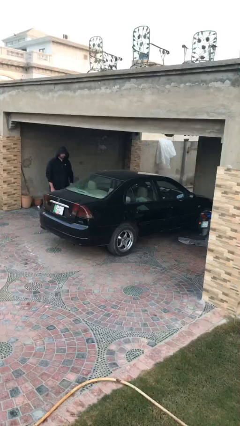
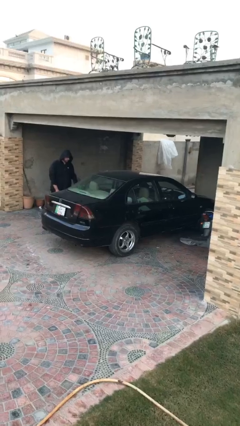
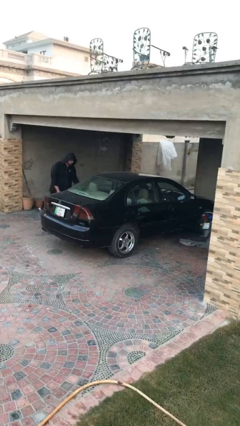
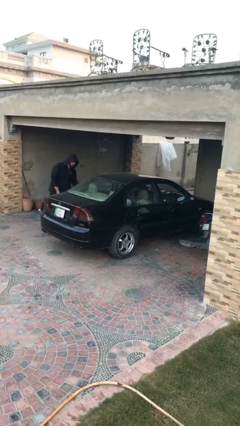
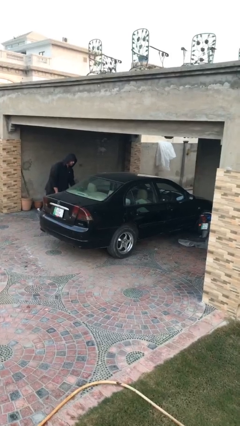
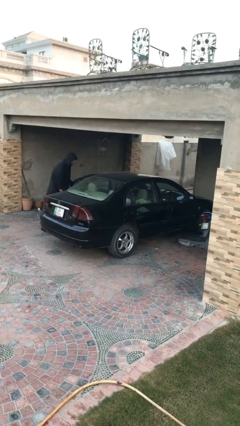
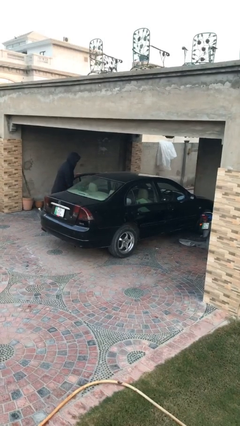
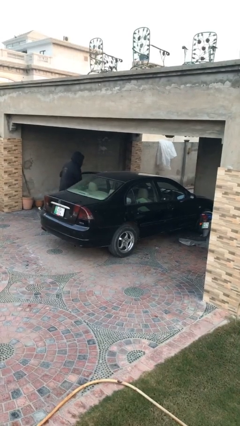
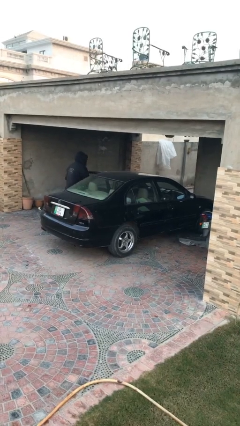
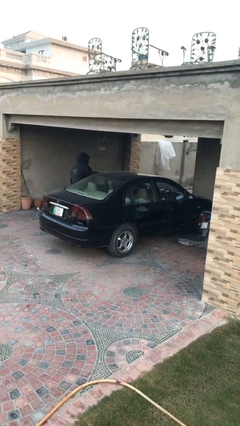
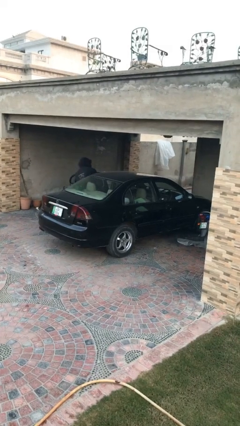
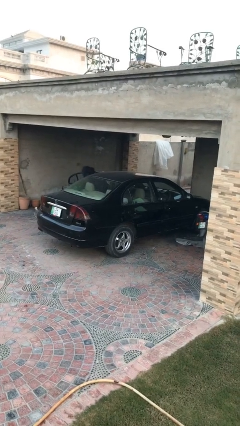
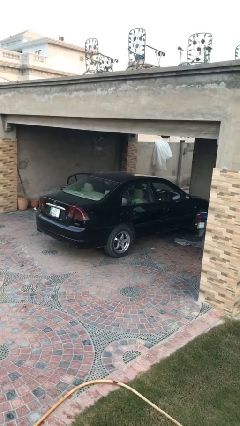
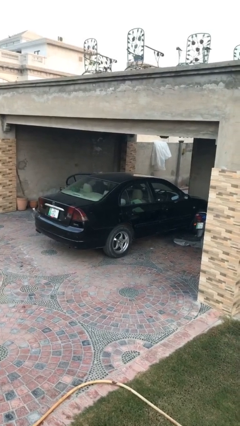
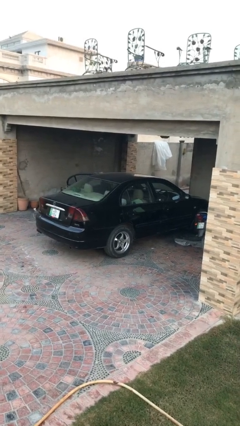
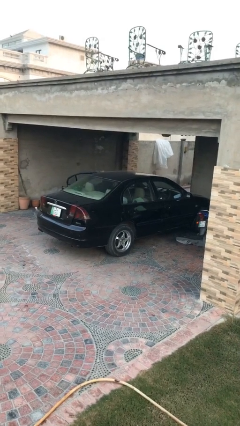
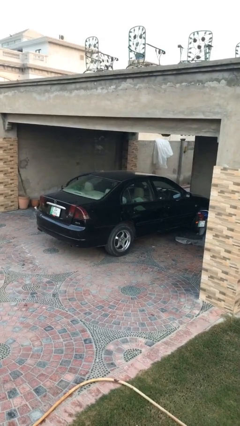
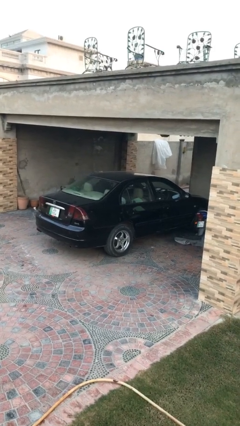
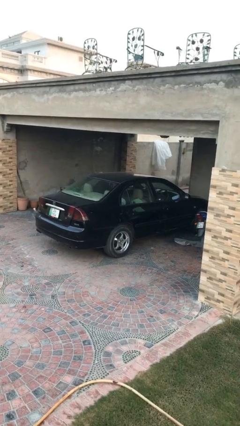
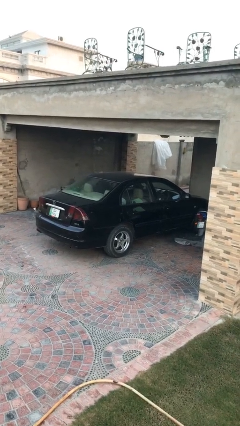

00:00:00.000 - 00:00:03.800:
car picks up person

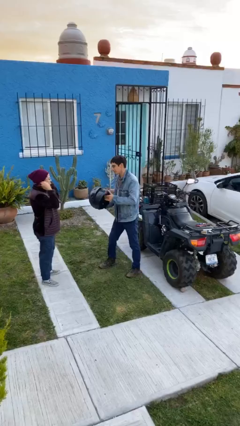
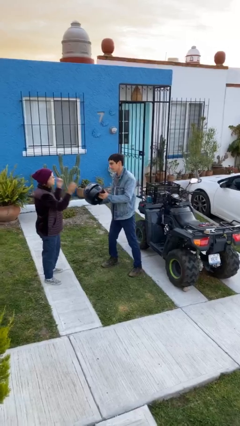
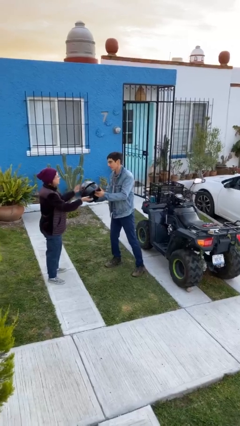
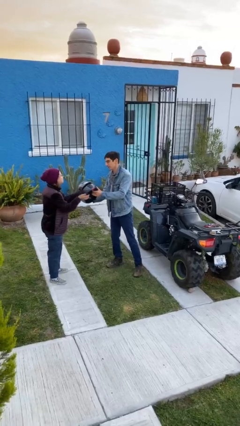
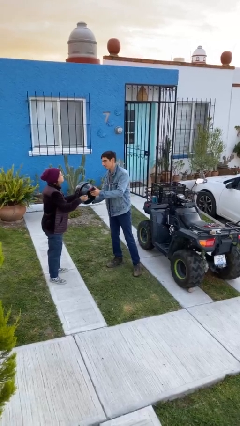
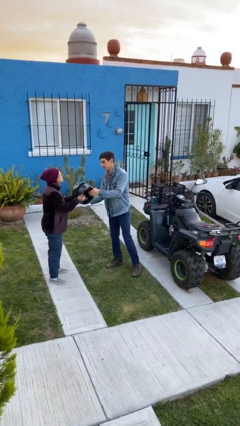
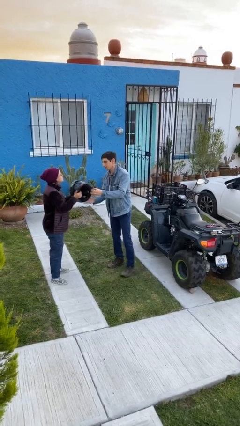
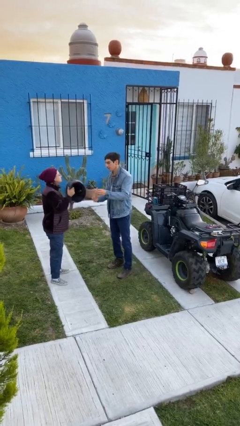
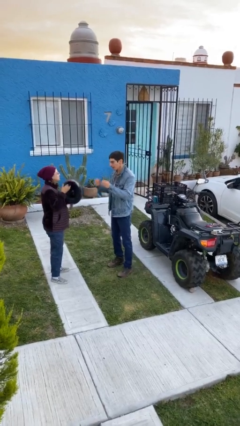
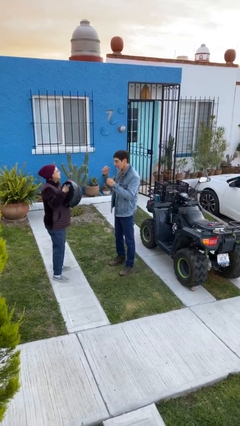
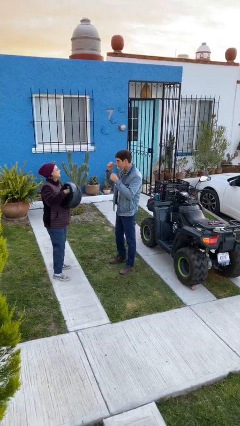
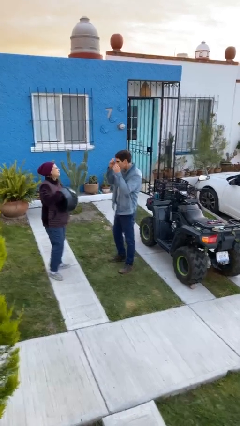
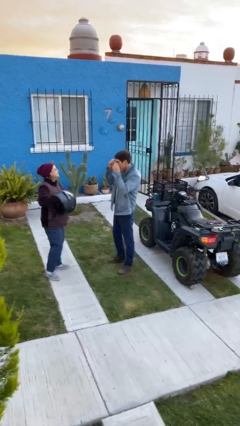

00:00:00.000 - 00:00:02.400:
person transfers object to person

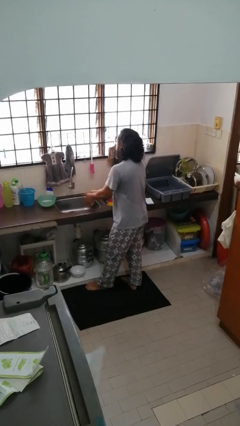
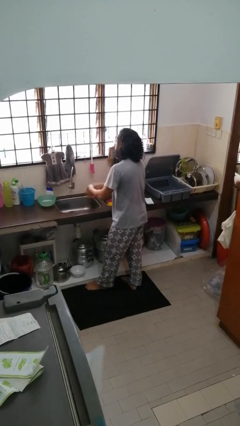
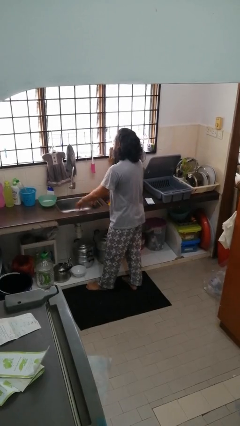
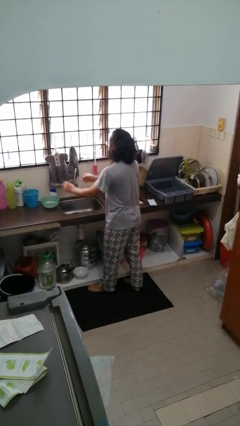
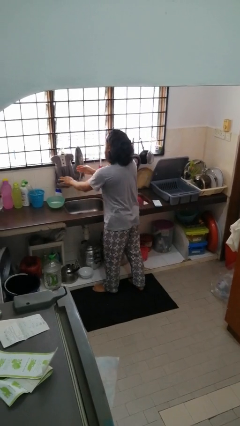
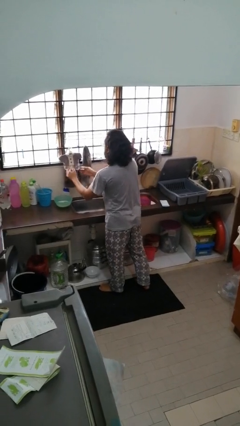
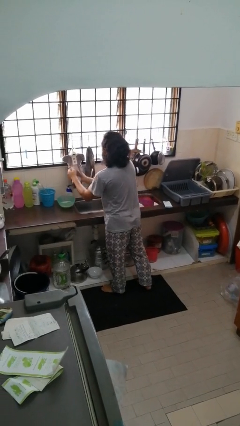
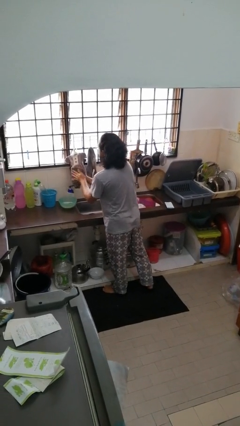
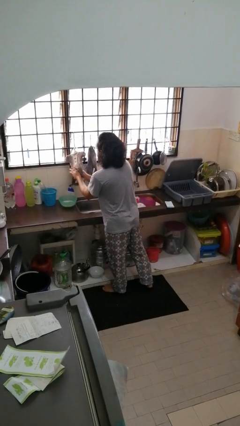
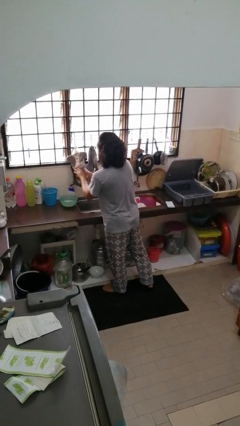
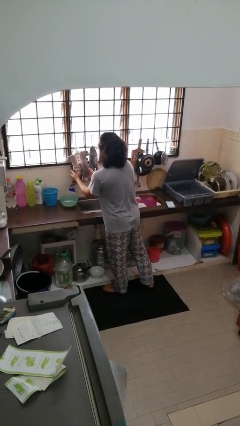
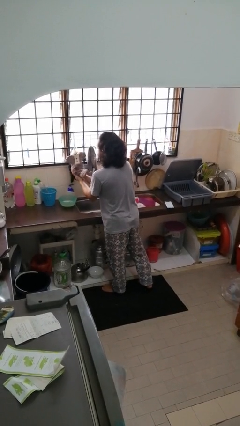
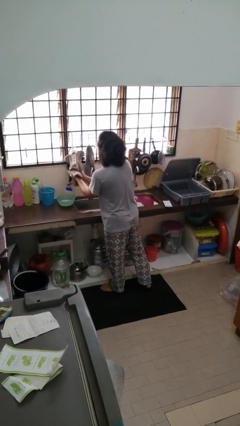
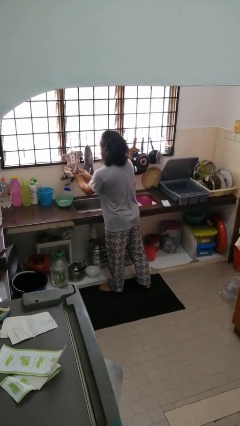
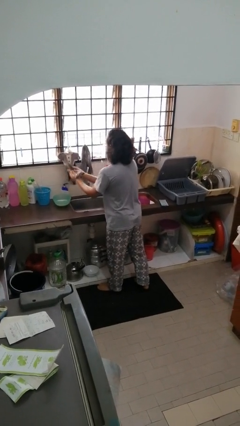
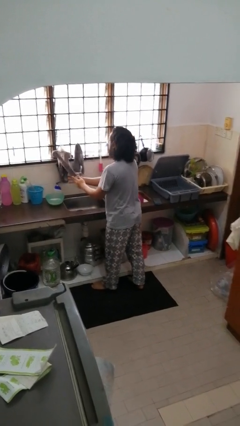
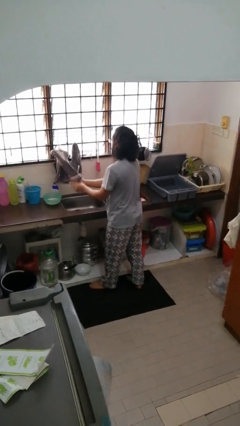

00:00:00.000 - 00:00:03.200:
person dries hands with towel

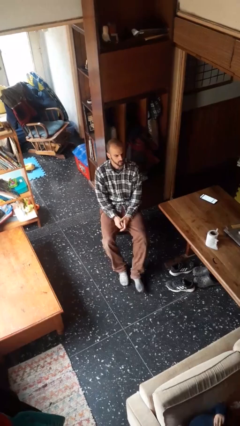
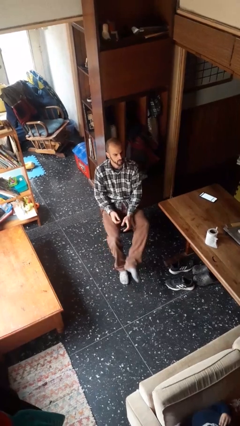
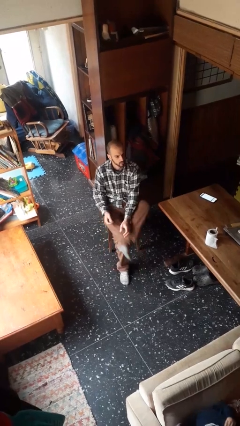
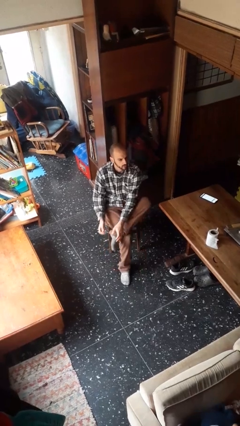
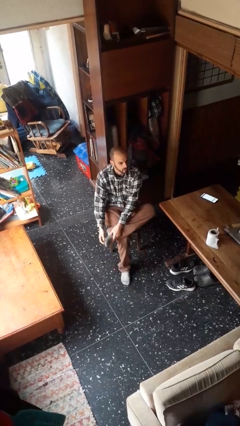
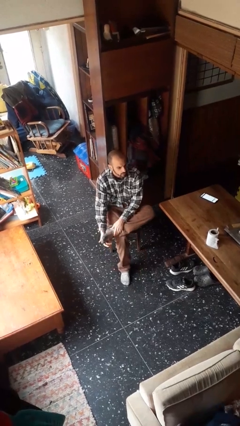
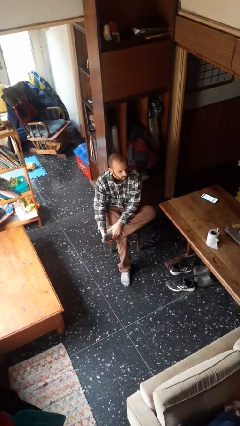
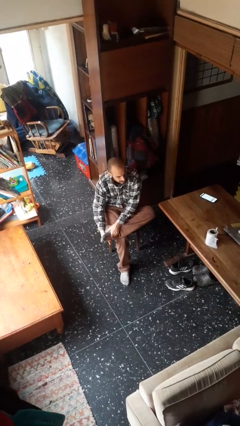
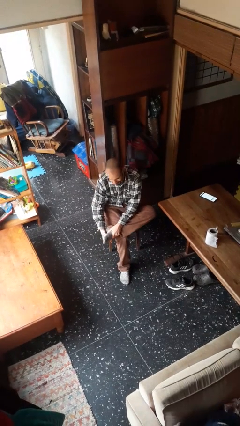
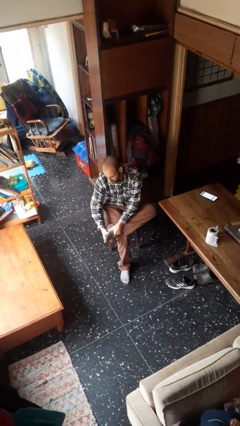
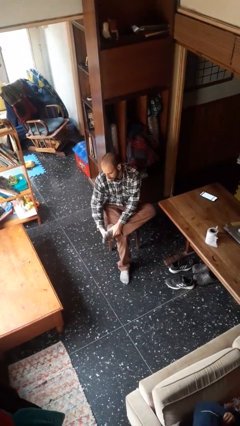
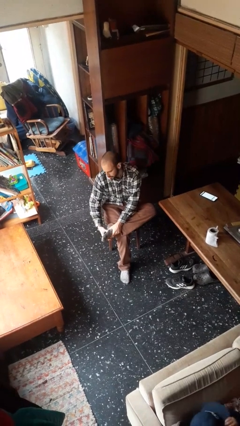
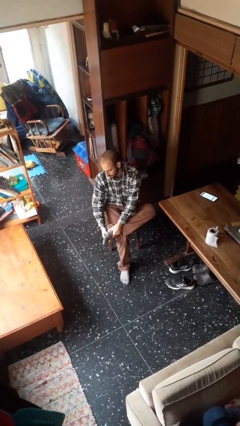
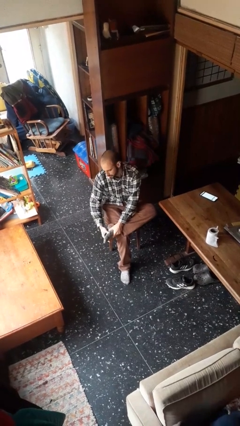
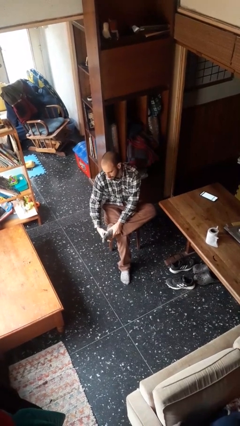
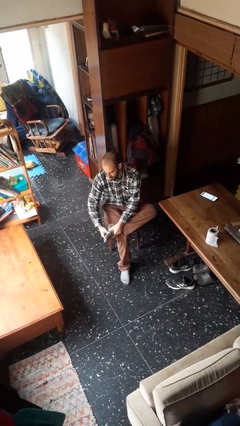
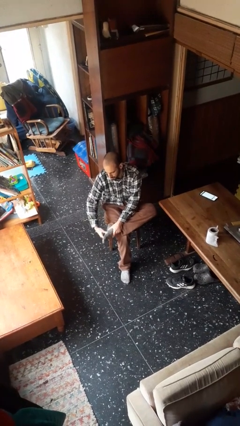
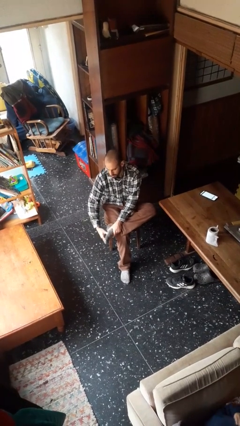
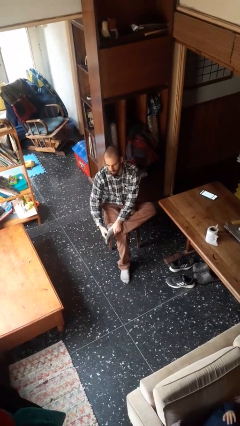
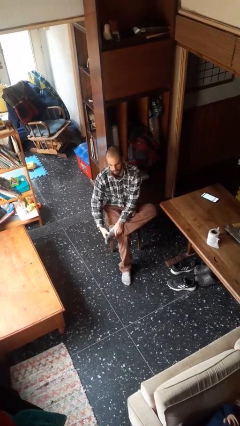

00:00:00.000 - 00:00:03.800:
person rubs foot

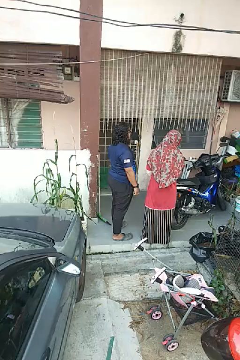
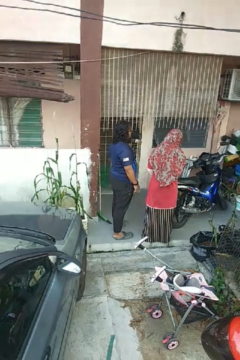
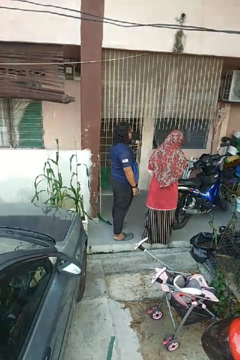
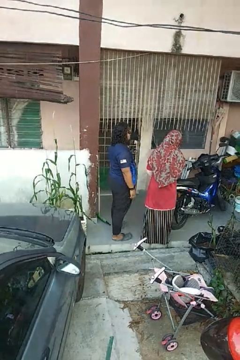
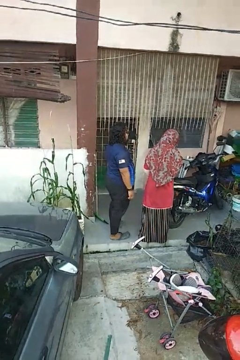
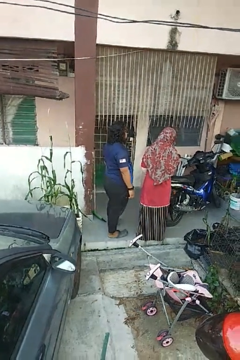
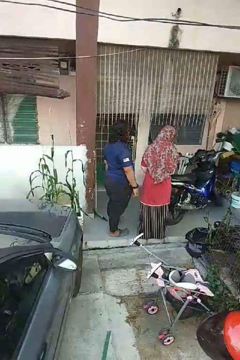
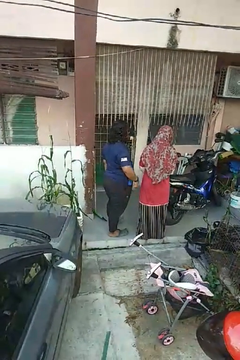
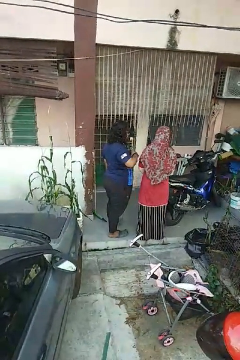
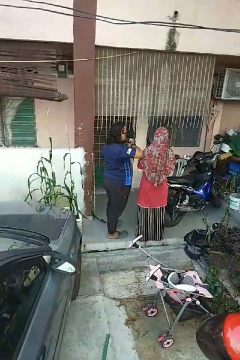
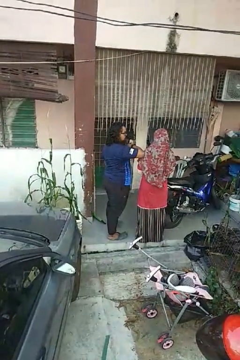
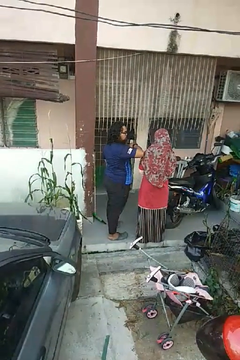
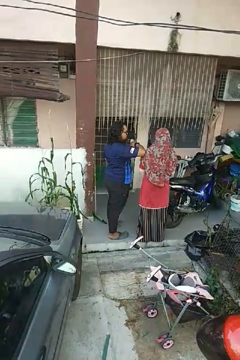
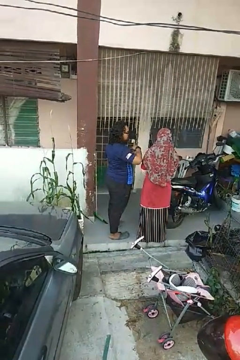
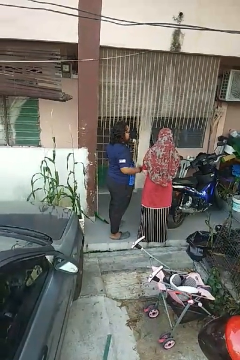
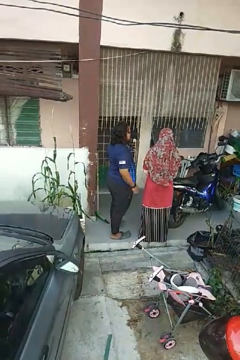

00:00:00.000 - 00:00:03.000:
person nudges person with elbow

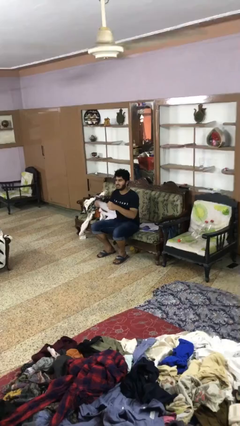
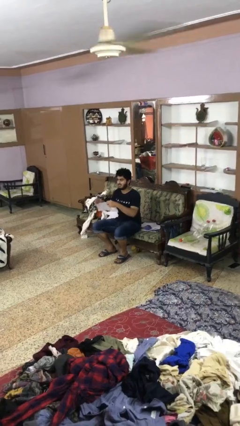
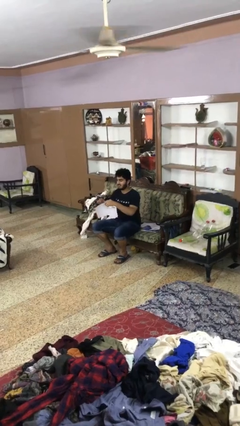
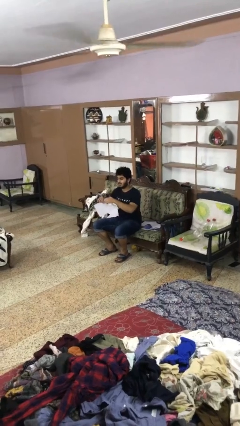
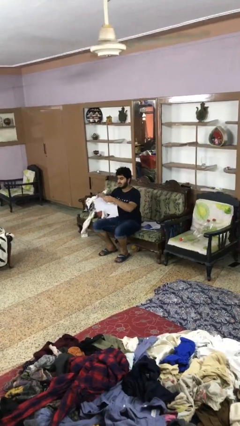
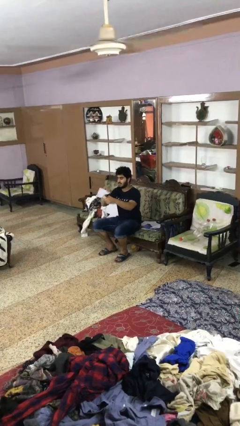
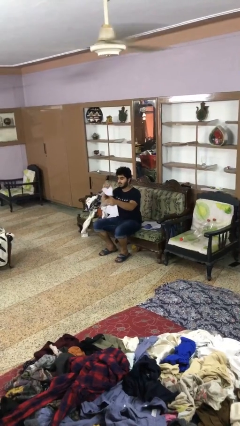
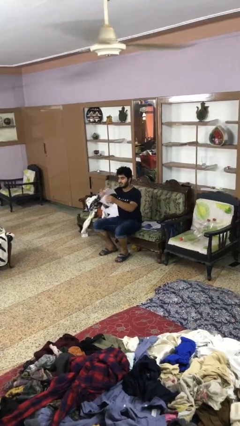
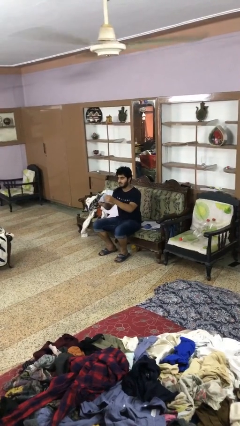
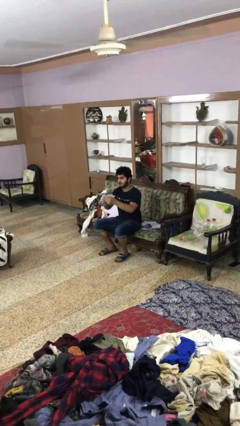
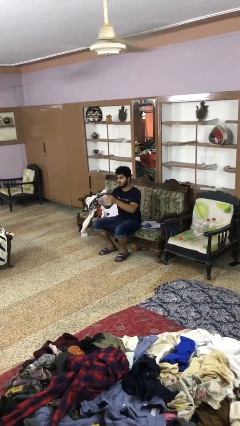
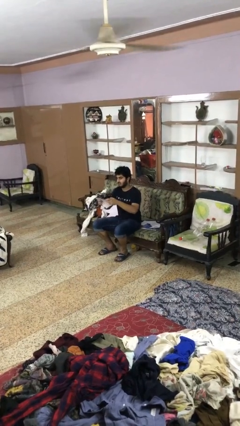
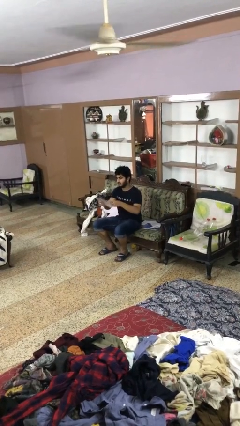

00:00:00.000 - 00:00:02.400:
person tears paper
